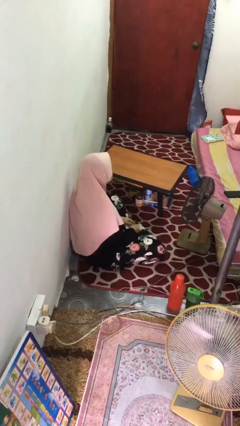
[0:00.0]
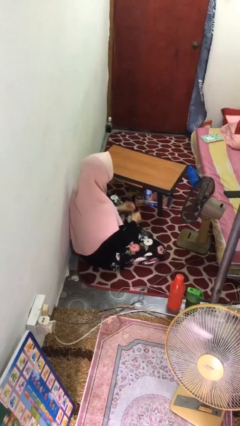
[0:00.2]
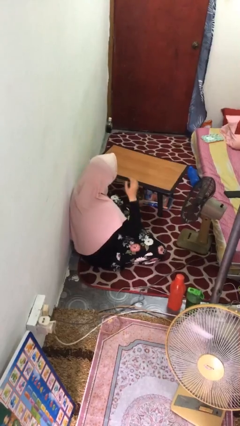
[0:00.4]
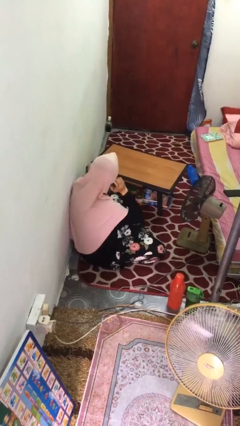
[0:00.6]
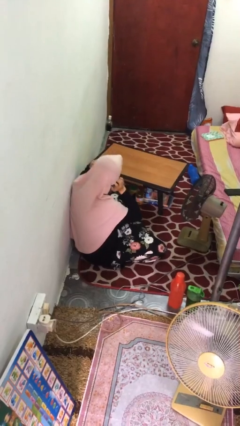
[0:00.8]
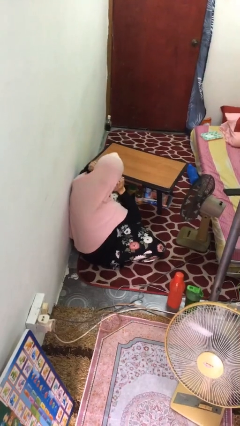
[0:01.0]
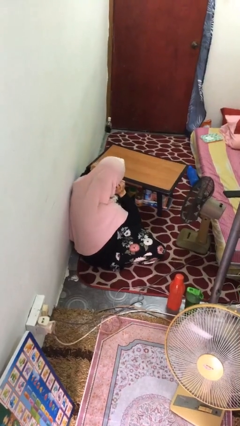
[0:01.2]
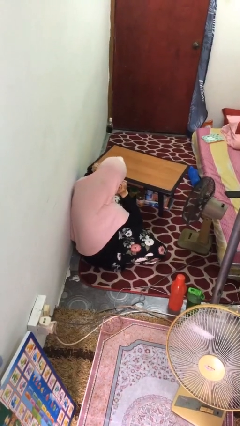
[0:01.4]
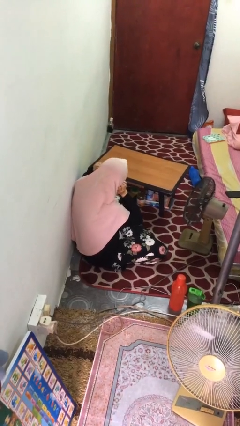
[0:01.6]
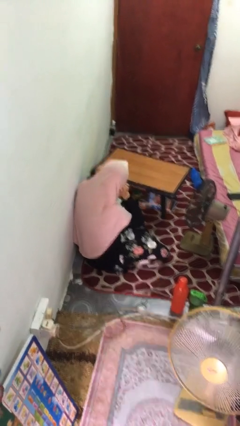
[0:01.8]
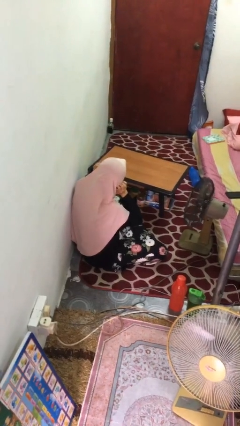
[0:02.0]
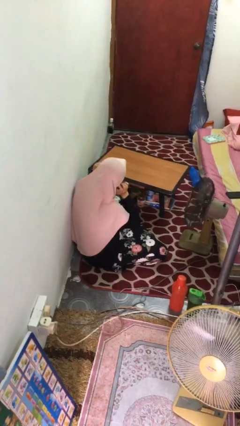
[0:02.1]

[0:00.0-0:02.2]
person puts fingers in ear

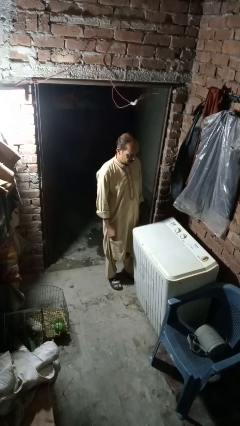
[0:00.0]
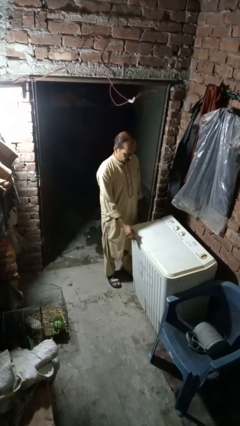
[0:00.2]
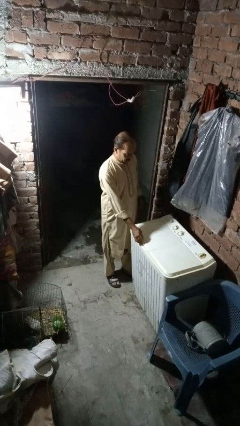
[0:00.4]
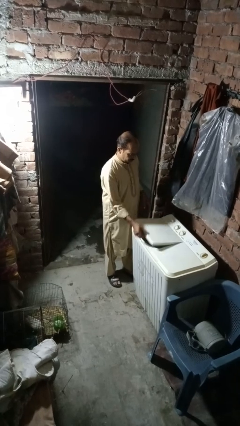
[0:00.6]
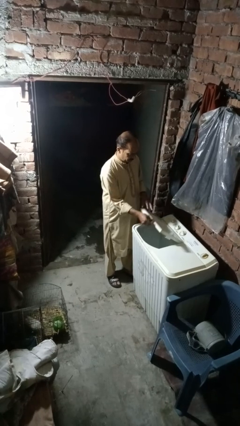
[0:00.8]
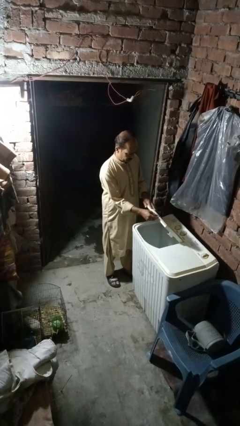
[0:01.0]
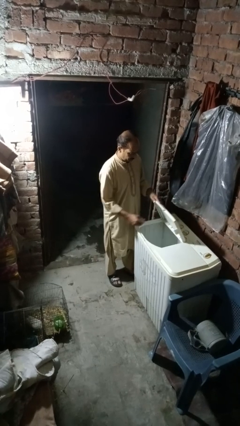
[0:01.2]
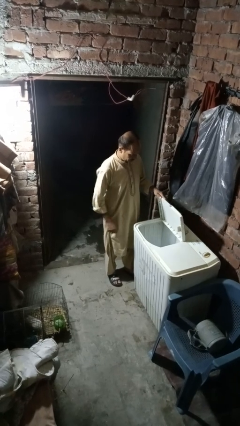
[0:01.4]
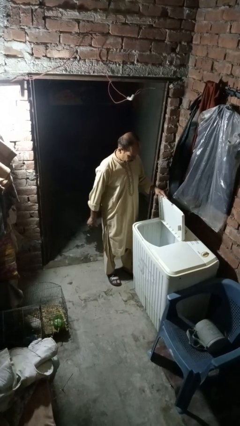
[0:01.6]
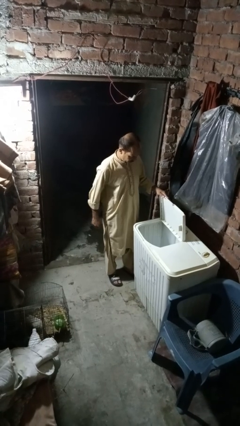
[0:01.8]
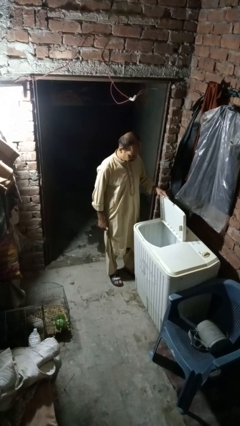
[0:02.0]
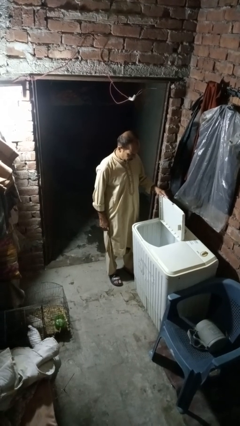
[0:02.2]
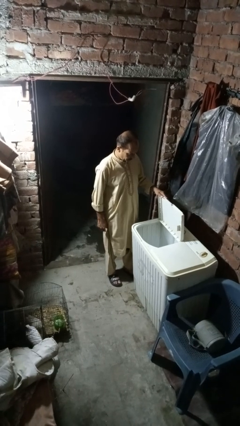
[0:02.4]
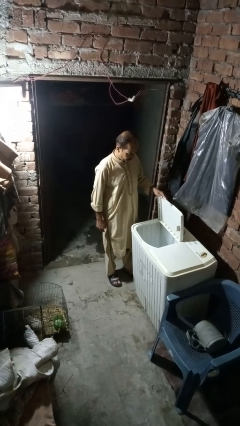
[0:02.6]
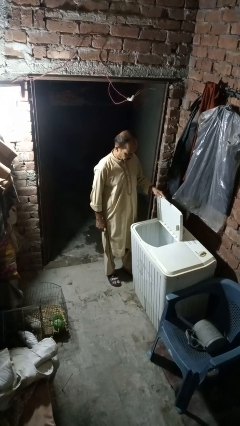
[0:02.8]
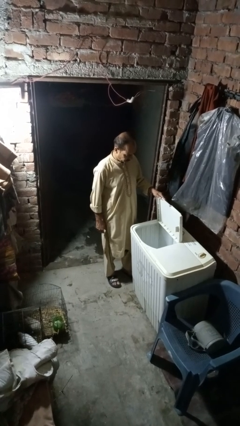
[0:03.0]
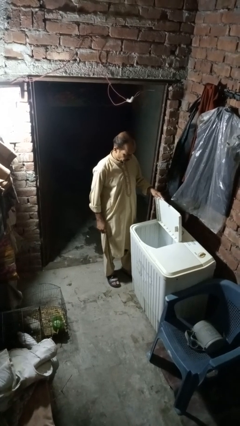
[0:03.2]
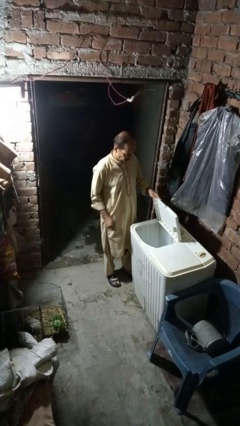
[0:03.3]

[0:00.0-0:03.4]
person opens clothes washer

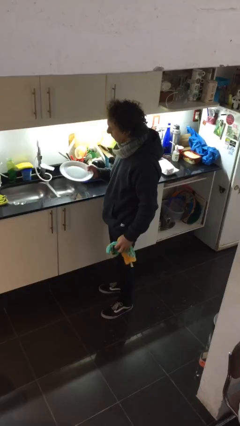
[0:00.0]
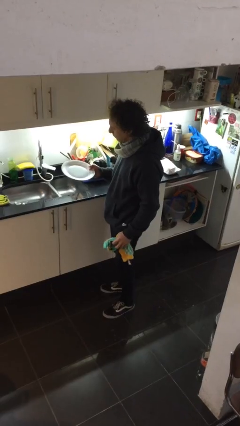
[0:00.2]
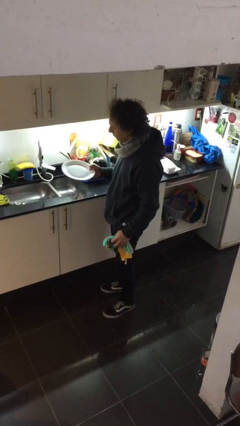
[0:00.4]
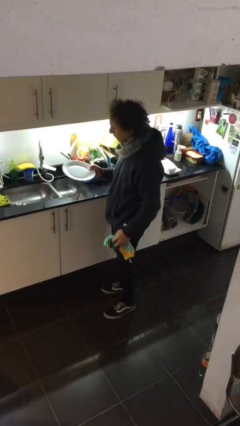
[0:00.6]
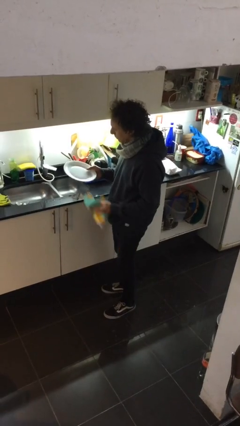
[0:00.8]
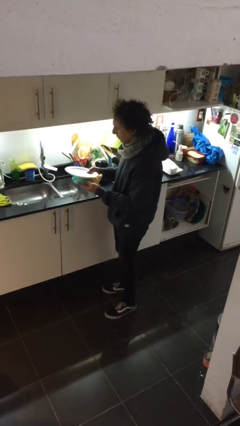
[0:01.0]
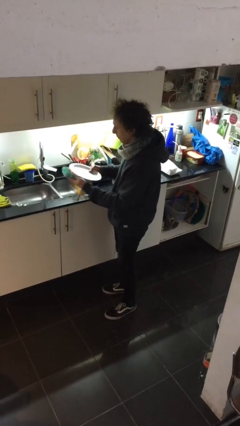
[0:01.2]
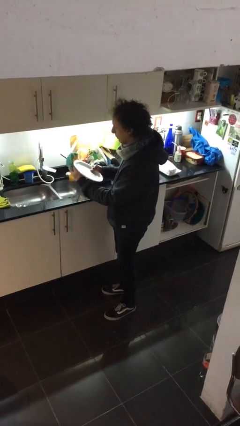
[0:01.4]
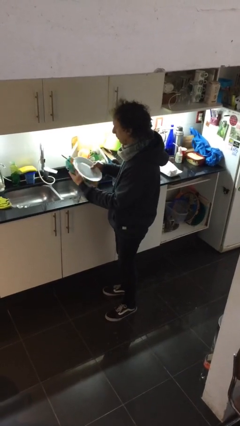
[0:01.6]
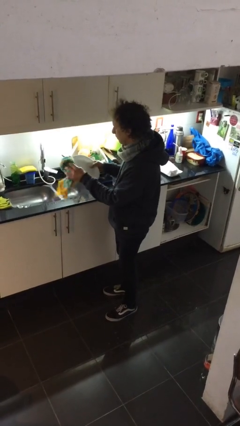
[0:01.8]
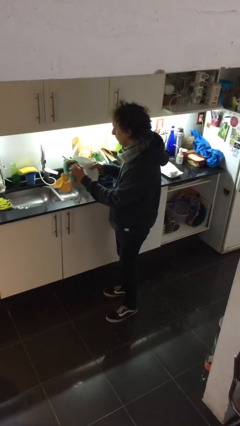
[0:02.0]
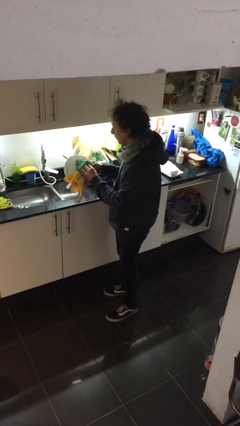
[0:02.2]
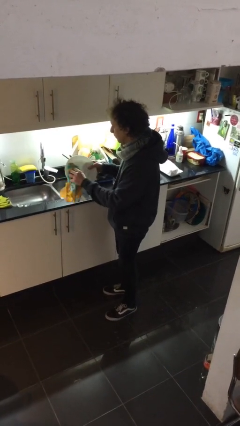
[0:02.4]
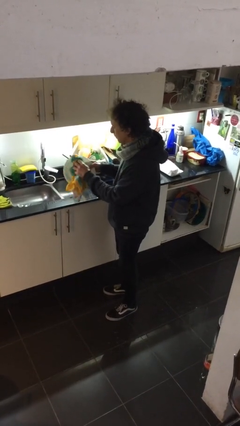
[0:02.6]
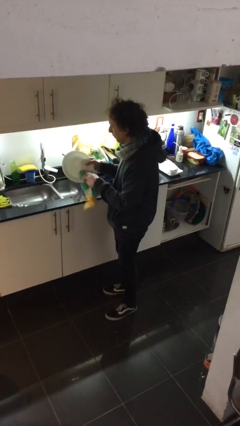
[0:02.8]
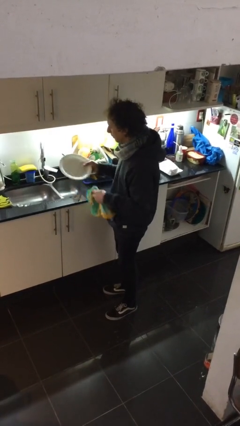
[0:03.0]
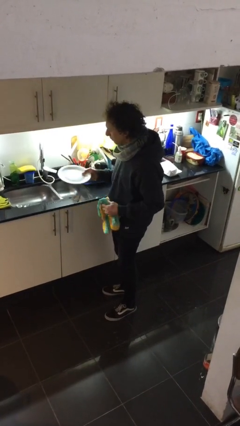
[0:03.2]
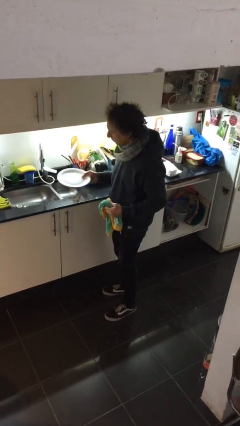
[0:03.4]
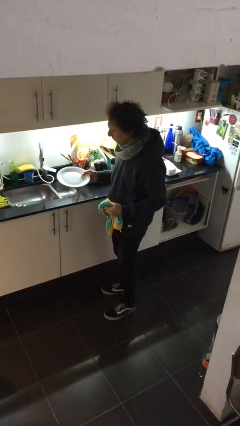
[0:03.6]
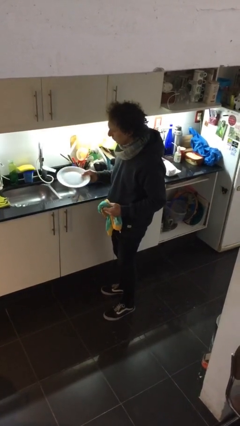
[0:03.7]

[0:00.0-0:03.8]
person dries dish

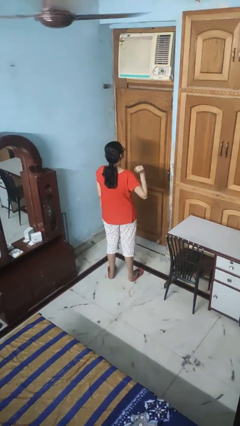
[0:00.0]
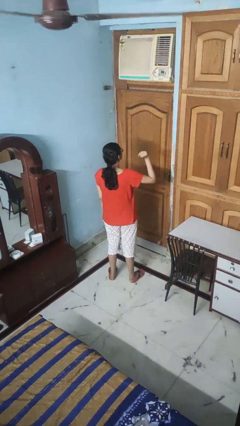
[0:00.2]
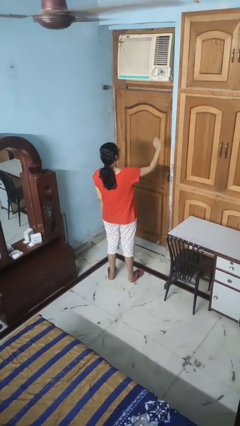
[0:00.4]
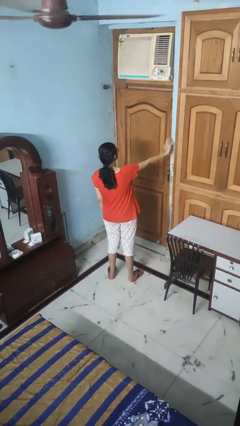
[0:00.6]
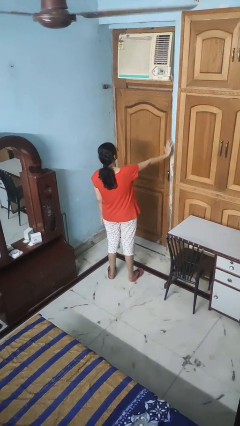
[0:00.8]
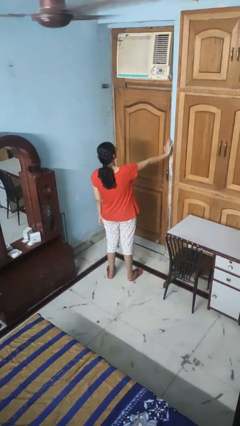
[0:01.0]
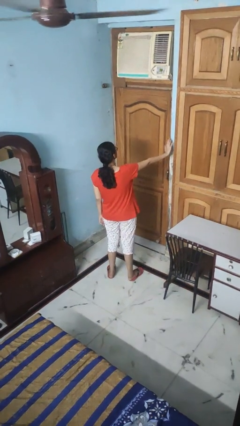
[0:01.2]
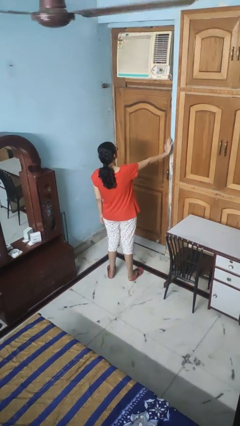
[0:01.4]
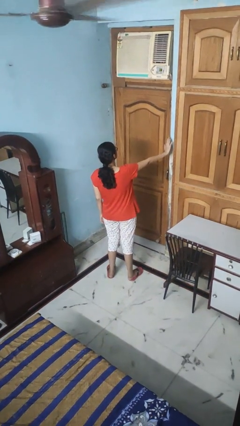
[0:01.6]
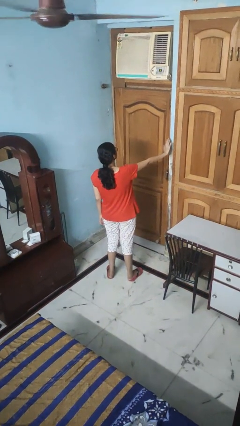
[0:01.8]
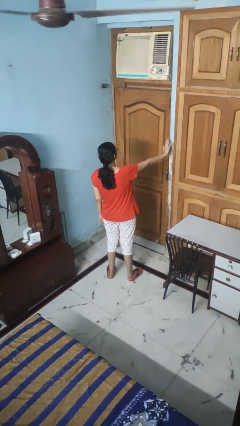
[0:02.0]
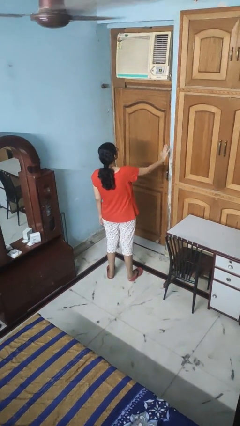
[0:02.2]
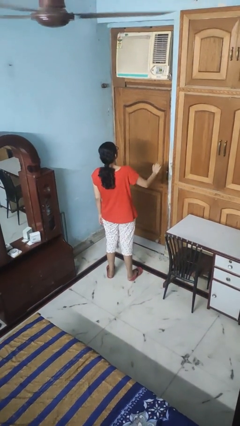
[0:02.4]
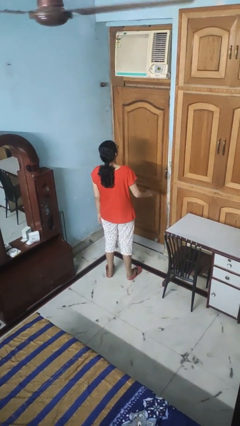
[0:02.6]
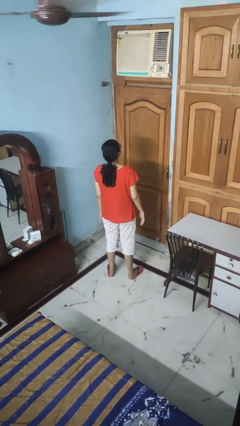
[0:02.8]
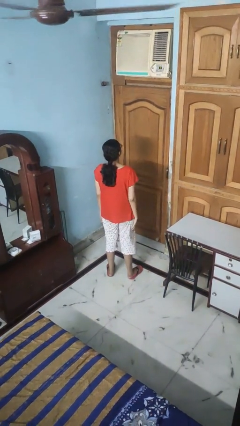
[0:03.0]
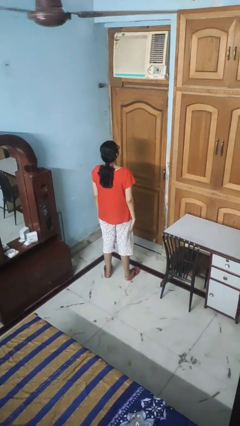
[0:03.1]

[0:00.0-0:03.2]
person gestures stop

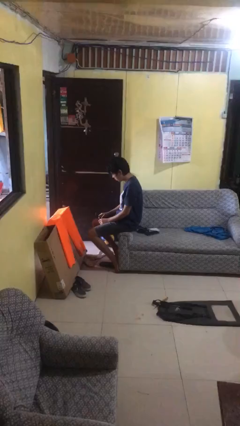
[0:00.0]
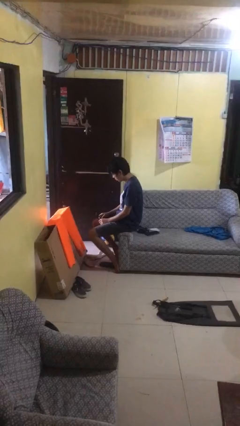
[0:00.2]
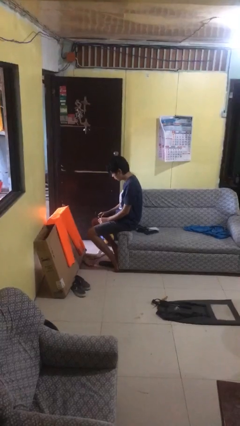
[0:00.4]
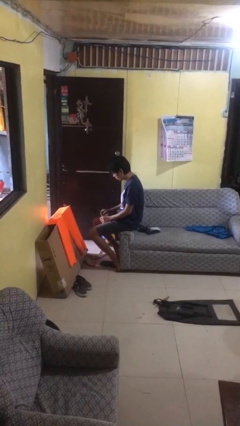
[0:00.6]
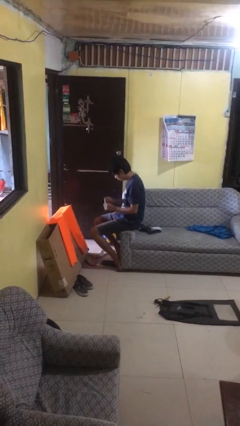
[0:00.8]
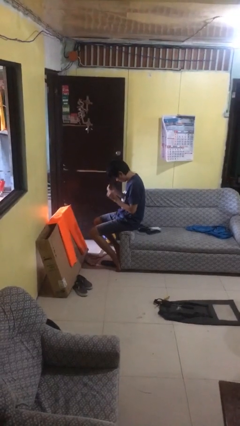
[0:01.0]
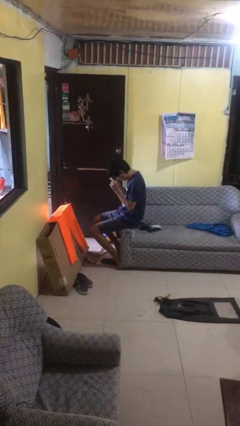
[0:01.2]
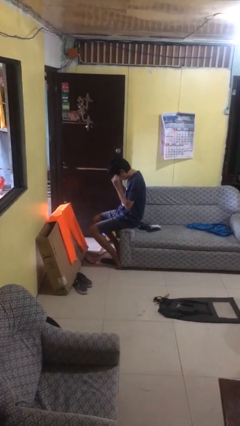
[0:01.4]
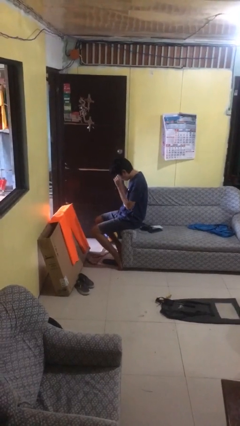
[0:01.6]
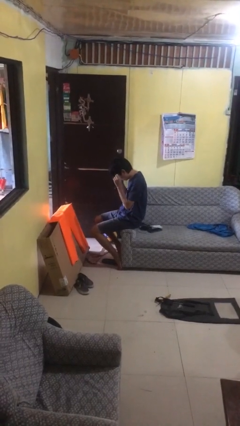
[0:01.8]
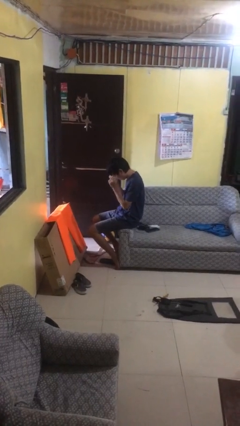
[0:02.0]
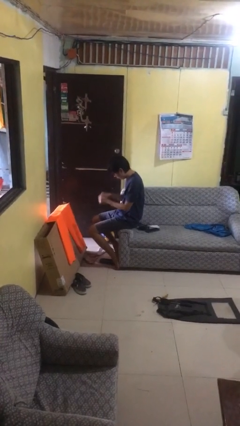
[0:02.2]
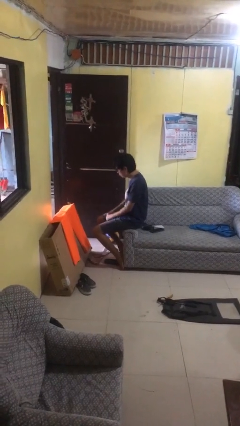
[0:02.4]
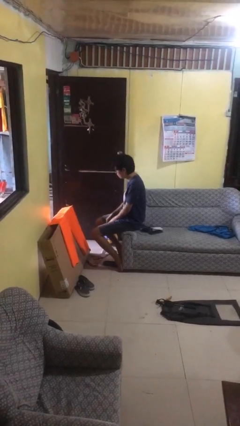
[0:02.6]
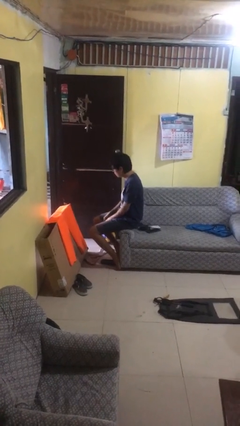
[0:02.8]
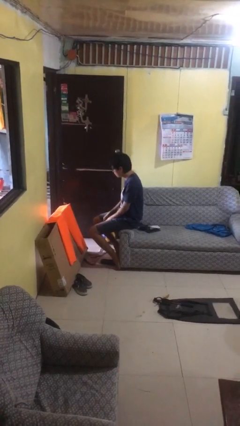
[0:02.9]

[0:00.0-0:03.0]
person puts on glasses

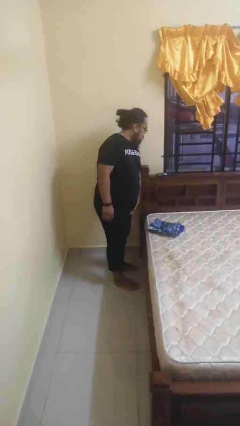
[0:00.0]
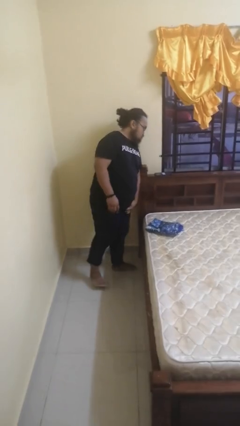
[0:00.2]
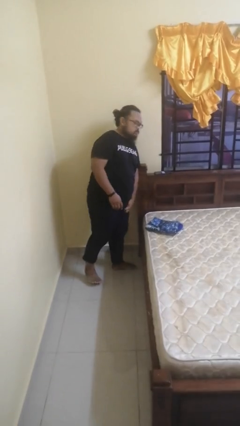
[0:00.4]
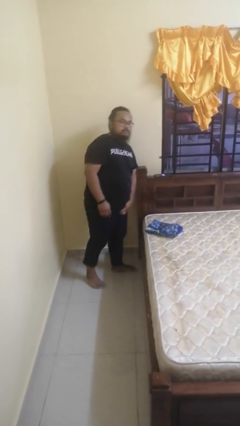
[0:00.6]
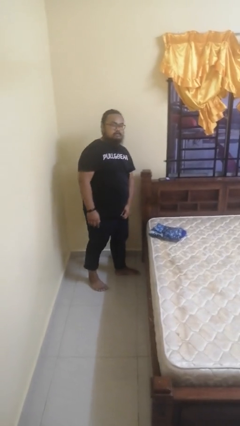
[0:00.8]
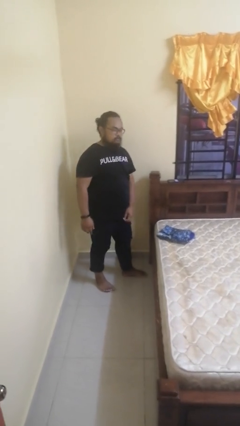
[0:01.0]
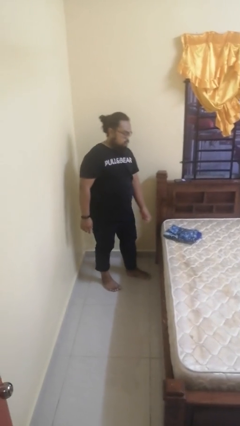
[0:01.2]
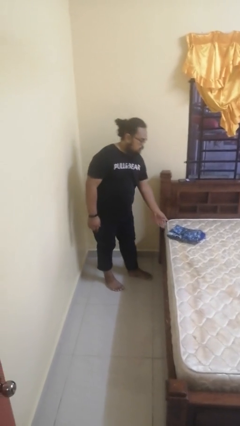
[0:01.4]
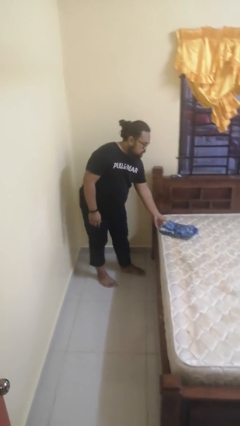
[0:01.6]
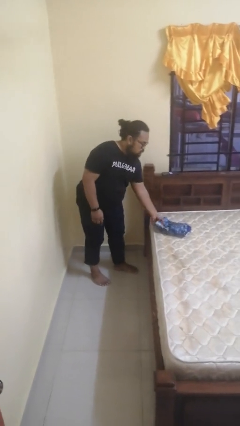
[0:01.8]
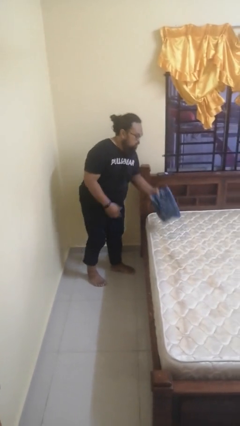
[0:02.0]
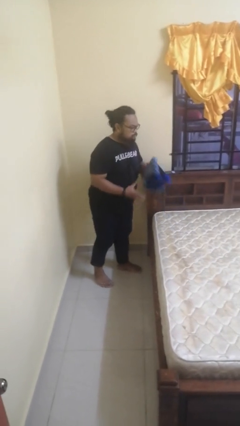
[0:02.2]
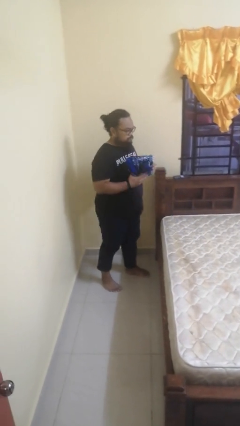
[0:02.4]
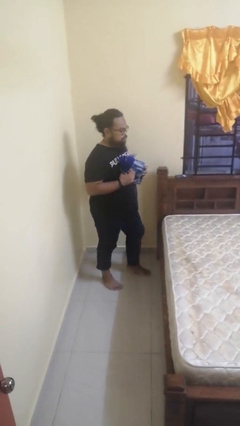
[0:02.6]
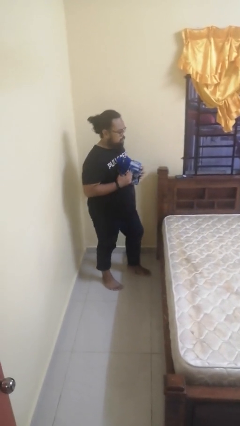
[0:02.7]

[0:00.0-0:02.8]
person picks up object from bed
